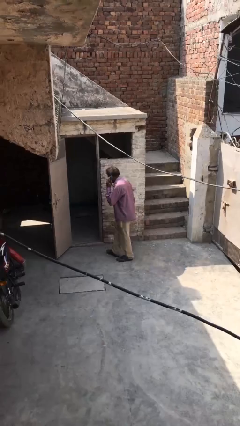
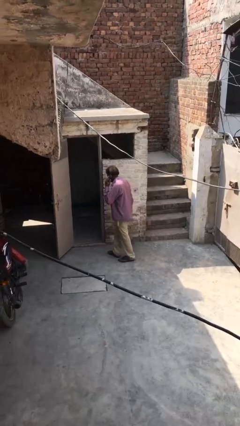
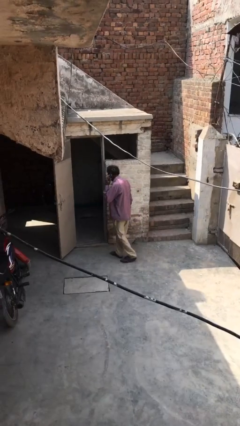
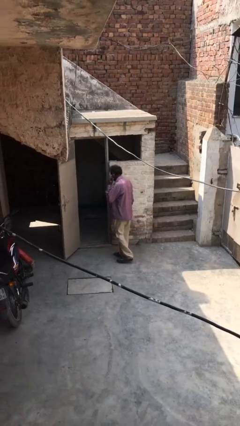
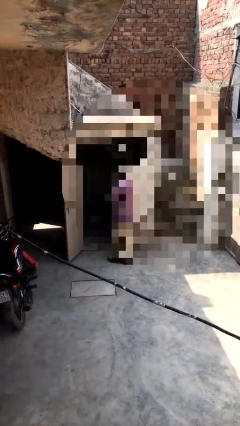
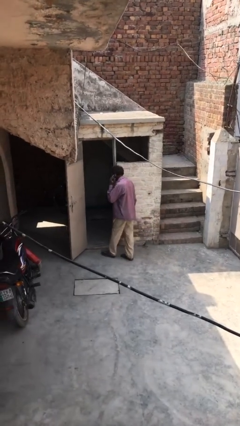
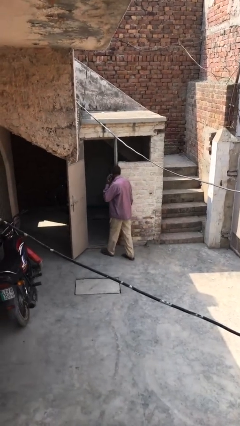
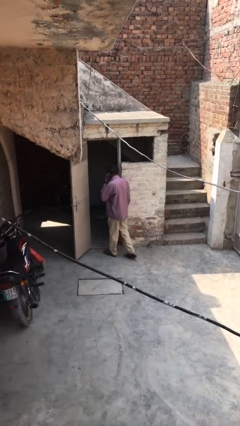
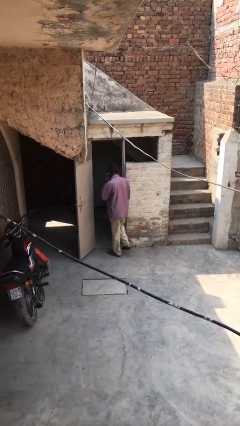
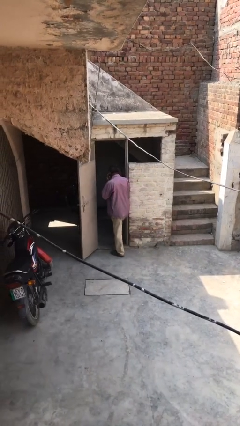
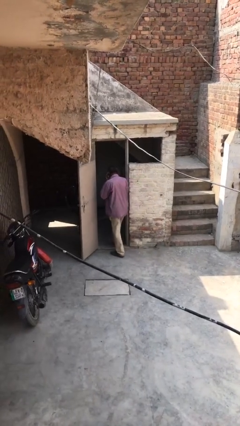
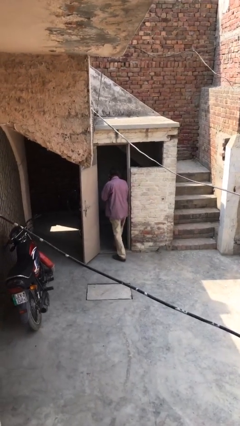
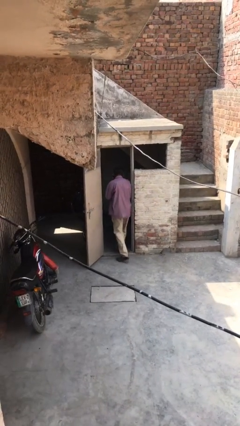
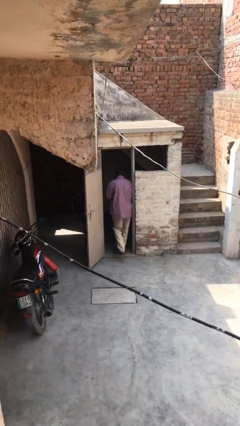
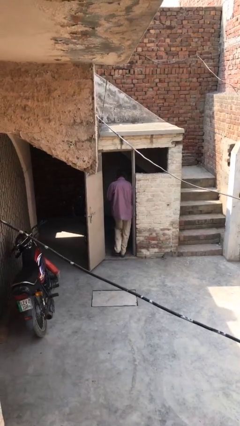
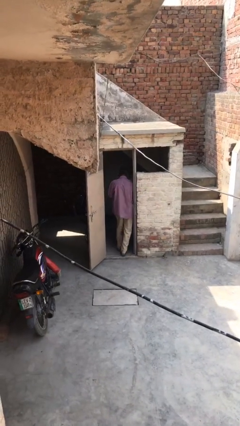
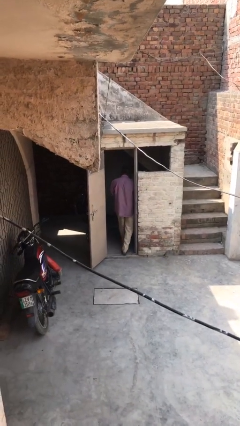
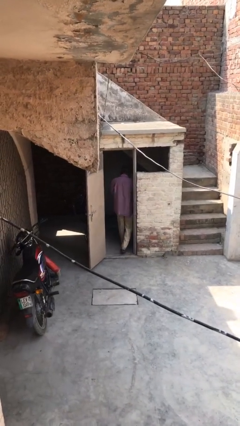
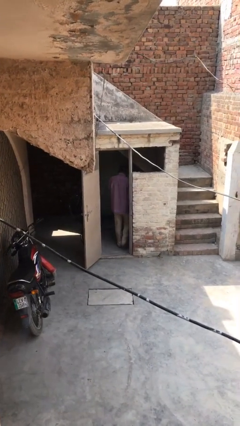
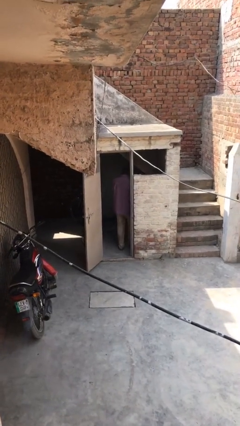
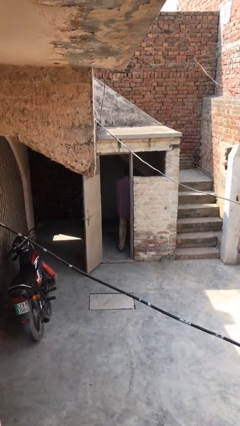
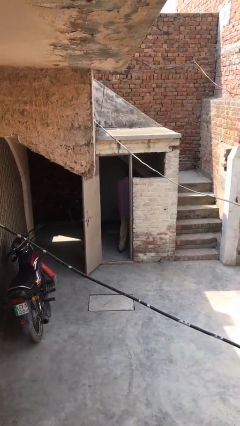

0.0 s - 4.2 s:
person exits scene through structure

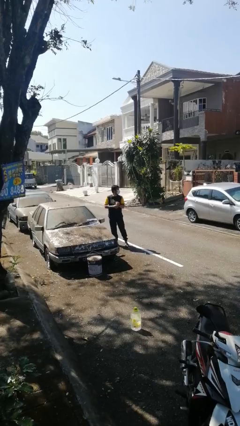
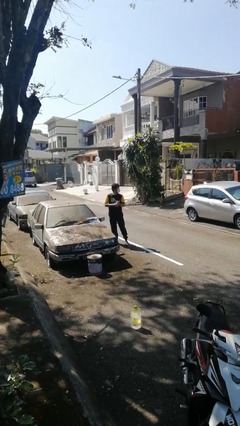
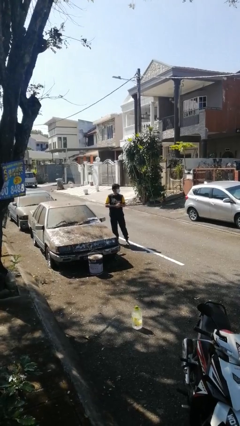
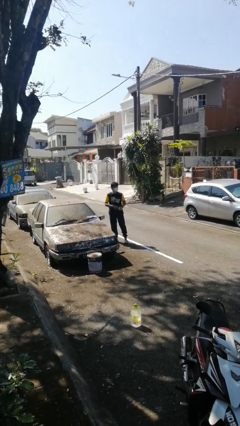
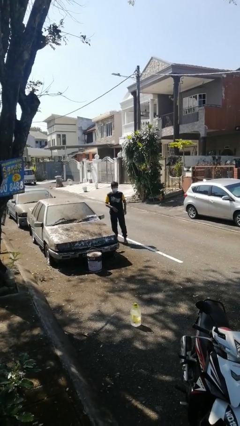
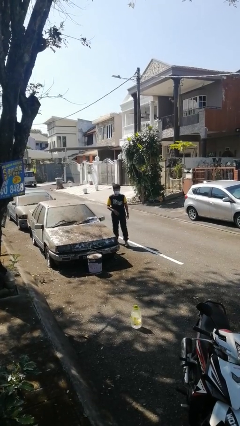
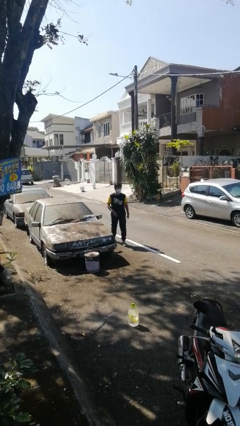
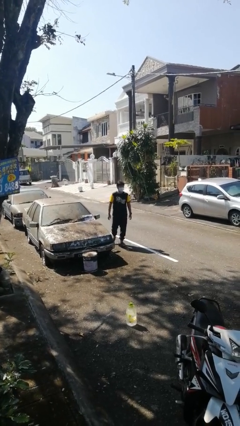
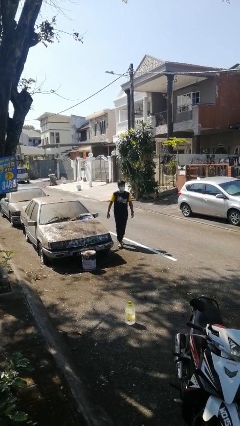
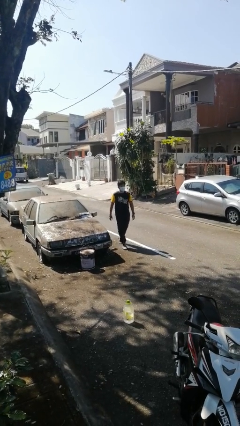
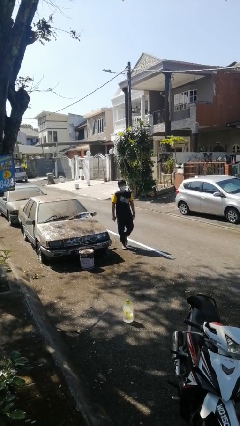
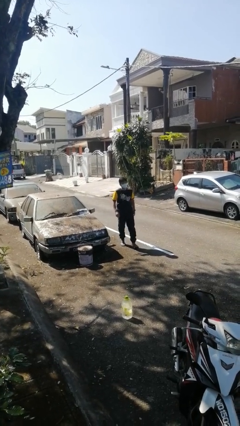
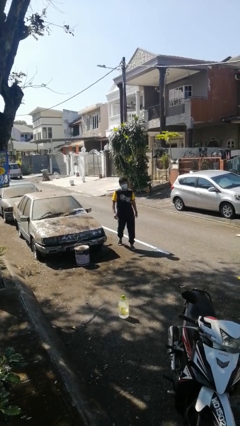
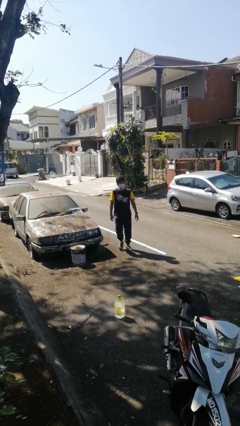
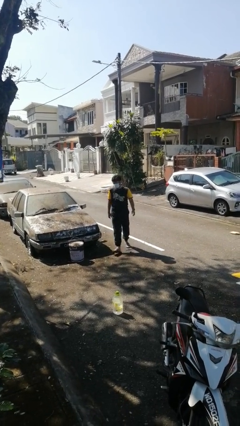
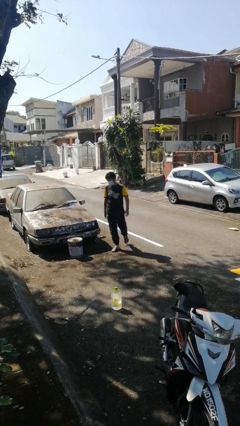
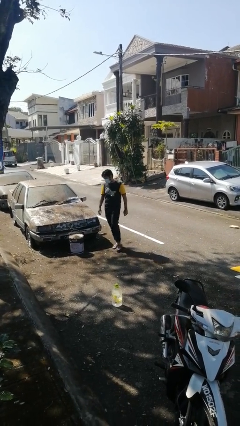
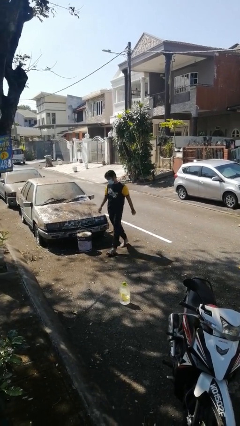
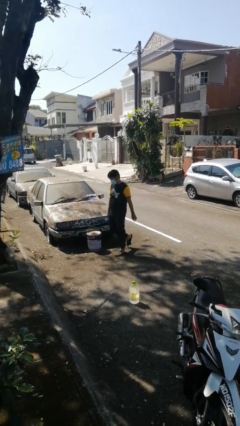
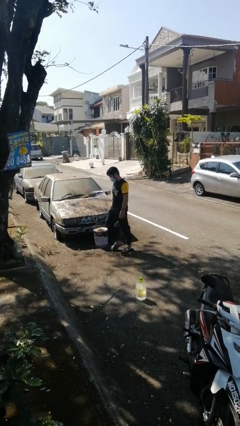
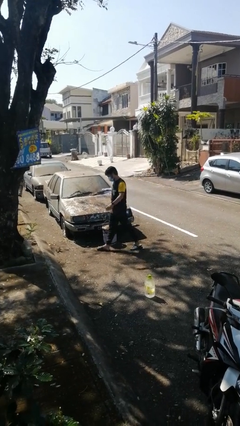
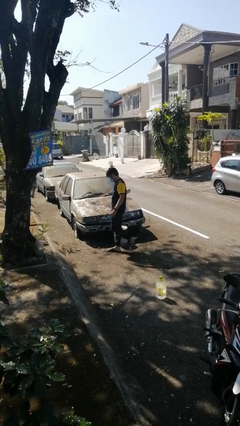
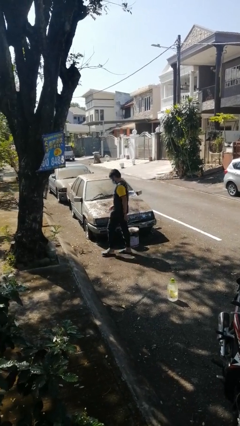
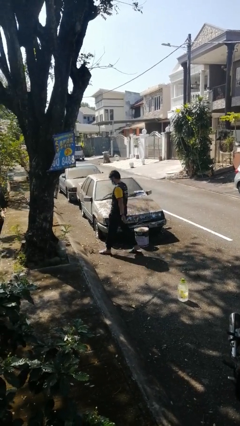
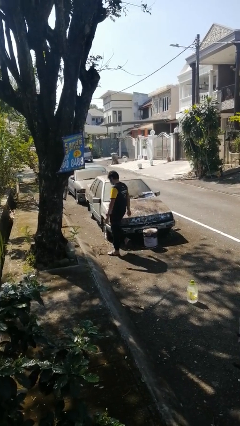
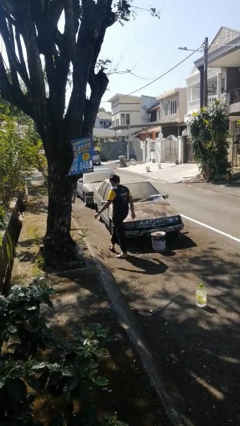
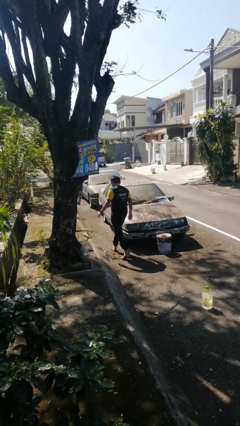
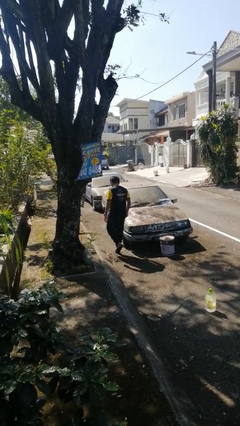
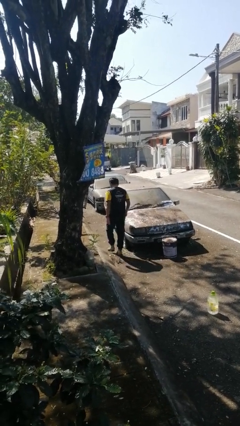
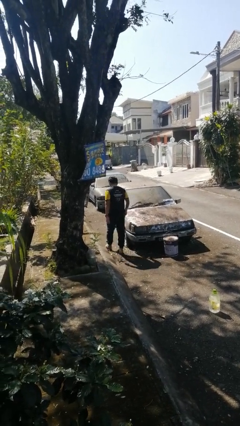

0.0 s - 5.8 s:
person walks around car

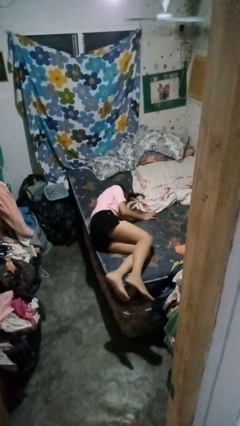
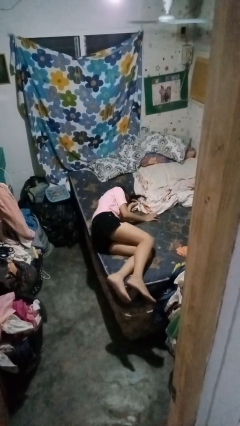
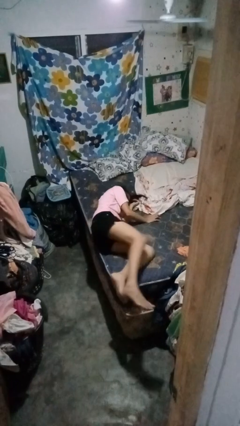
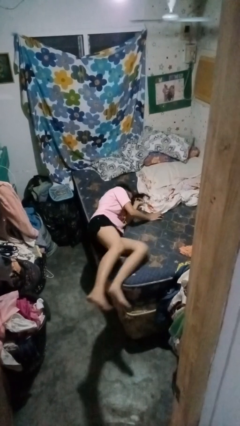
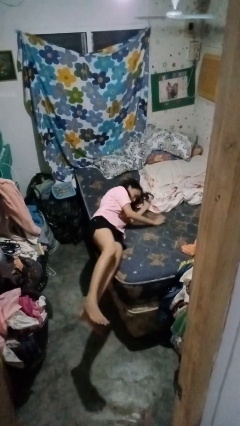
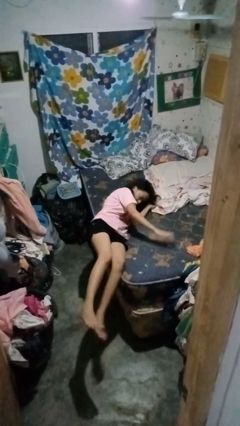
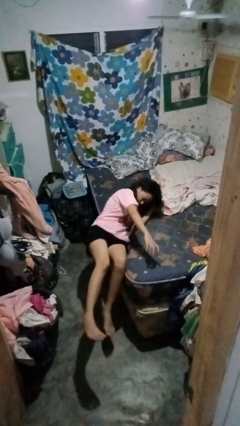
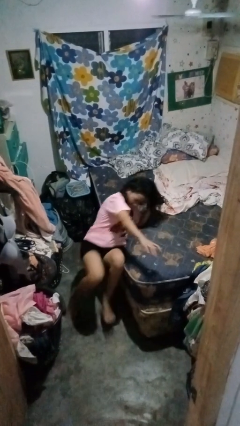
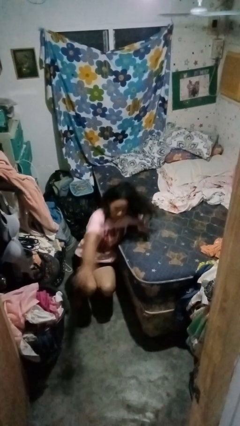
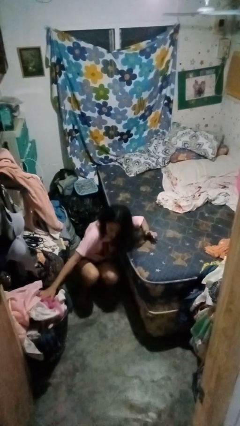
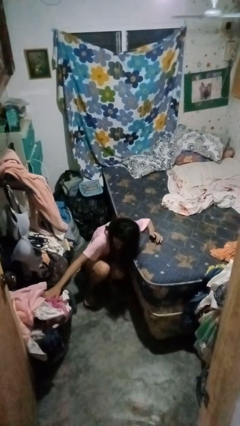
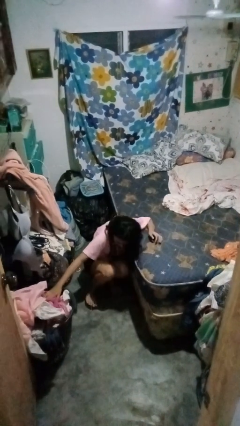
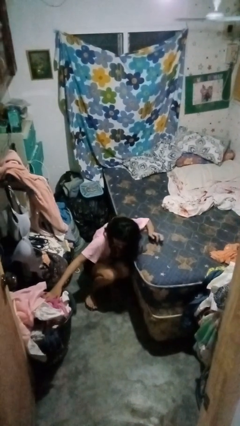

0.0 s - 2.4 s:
person falls from bed

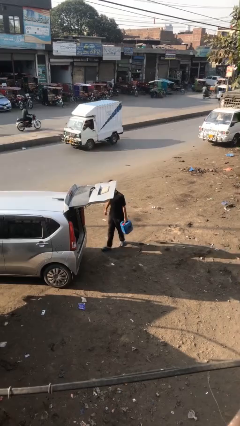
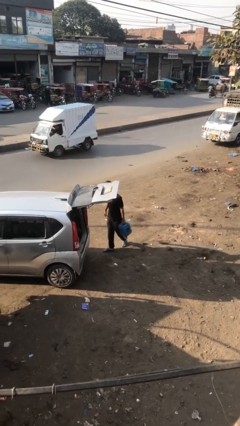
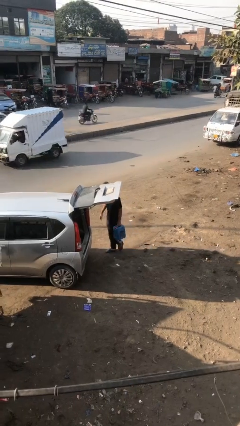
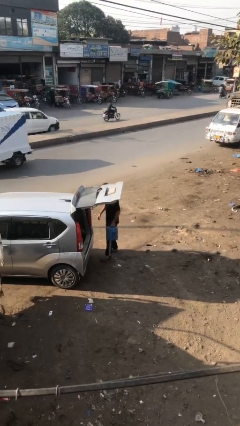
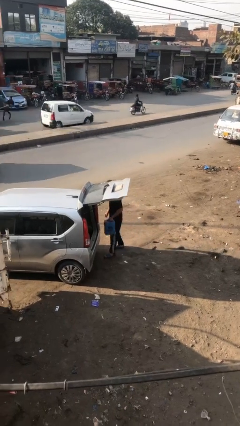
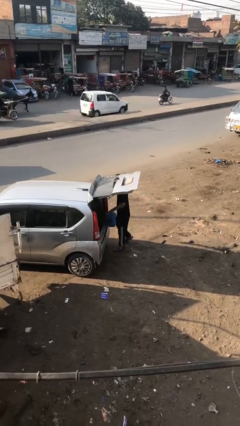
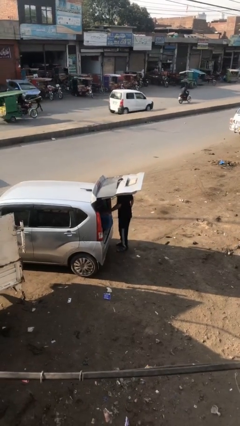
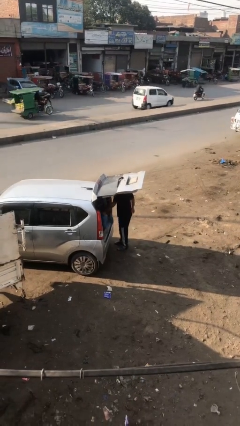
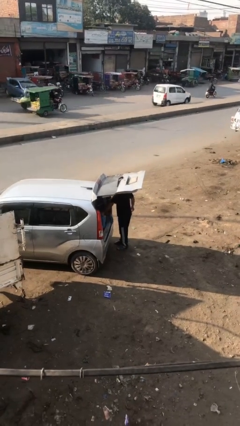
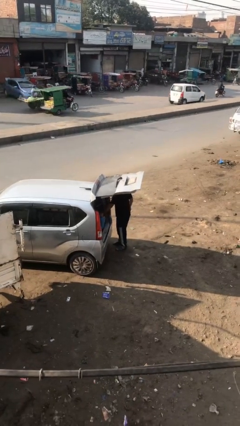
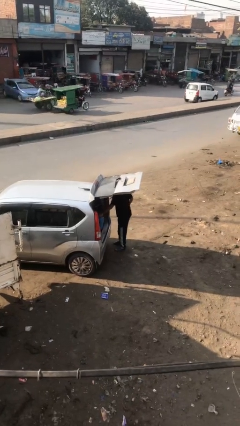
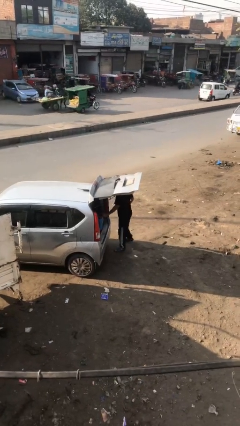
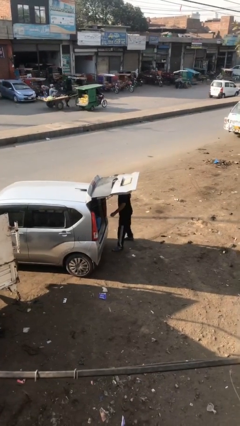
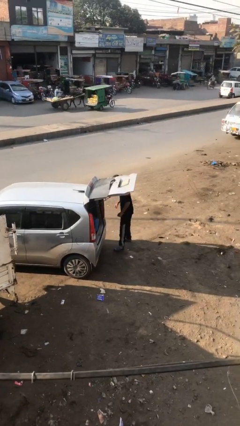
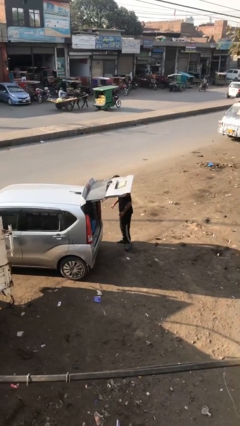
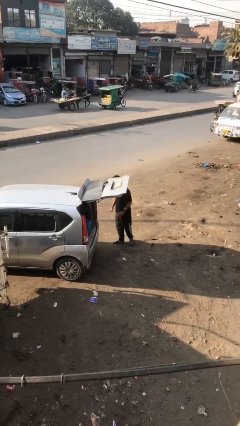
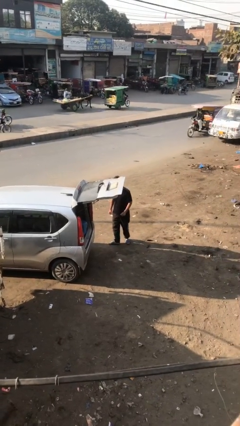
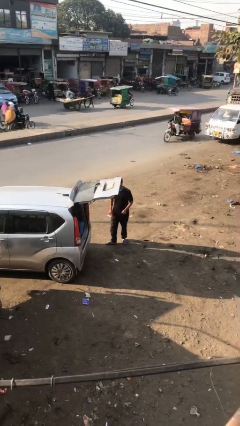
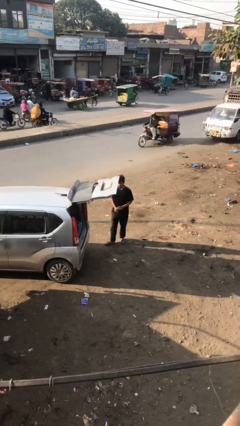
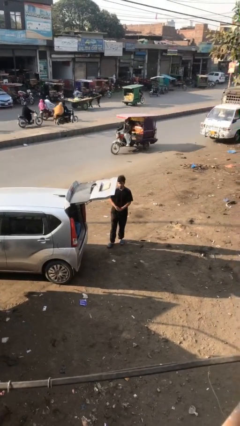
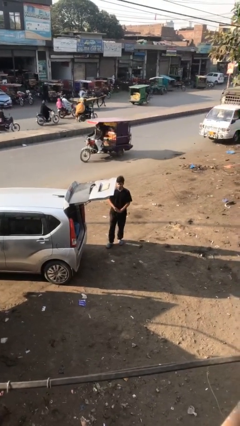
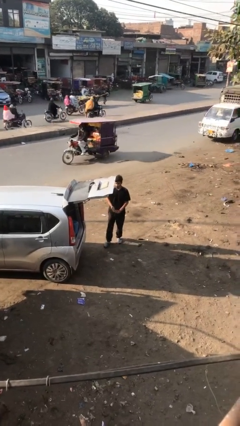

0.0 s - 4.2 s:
person loads car

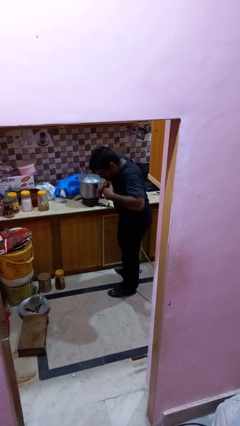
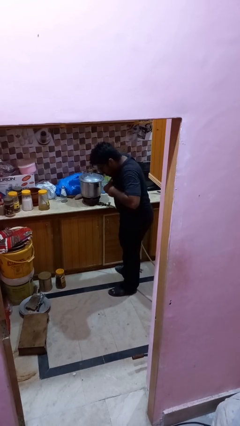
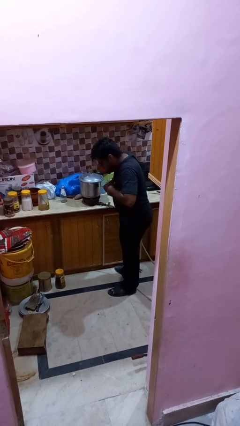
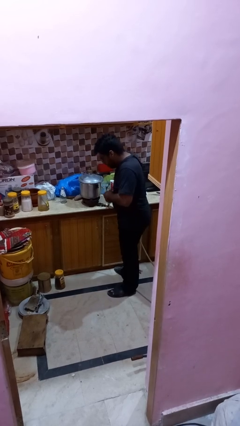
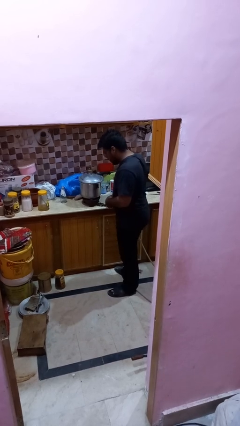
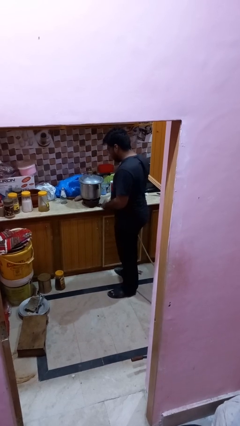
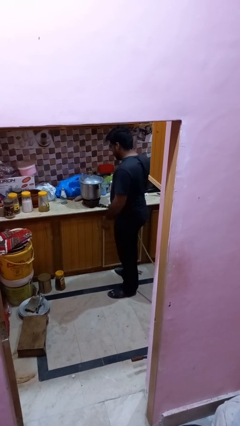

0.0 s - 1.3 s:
person burns hand
